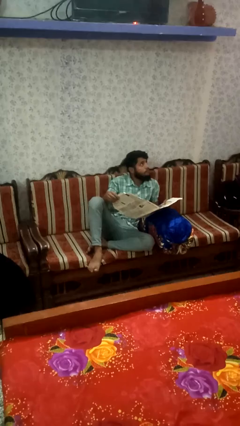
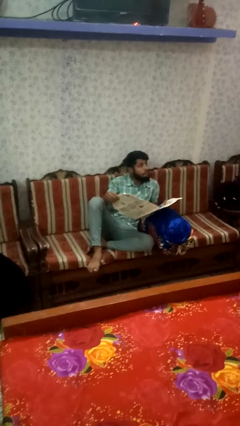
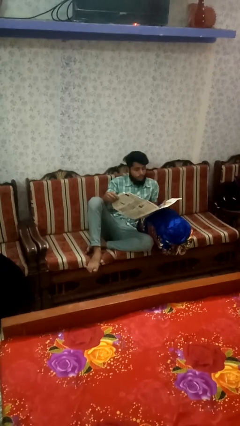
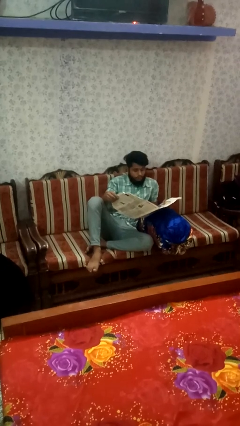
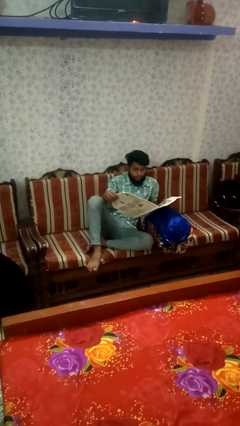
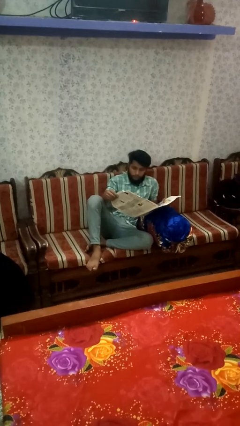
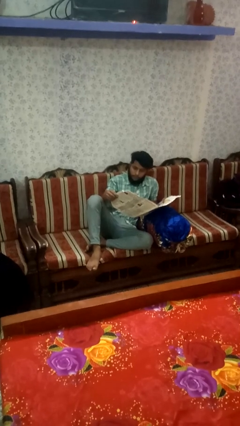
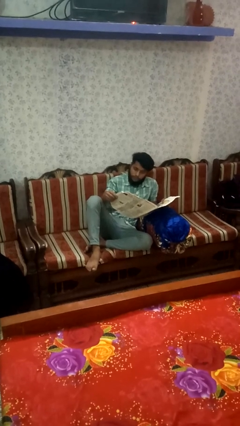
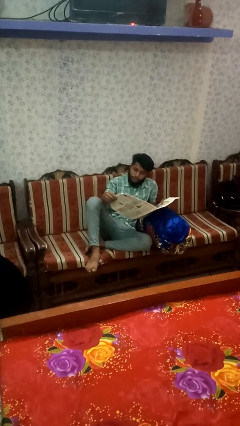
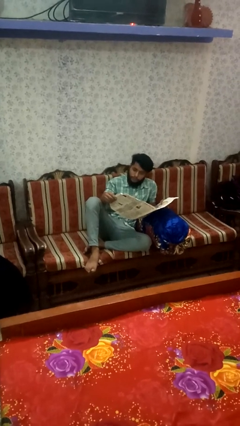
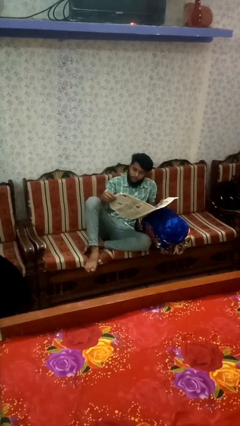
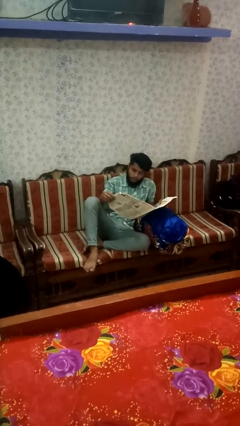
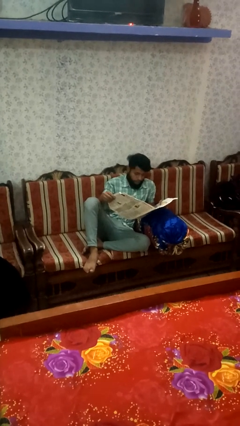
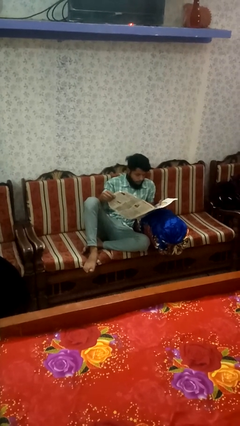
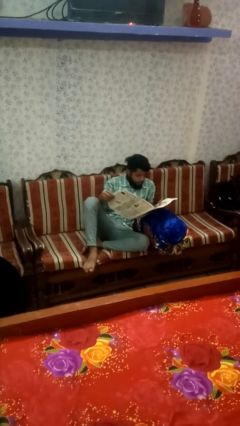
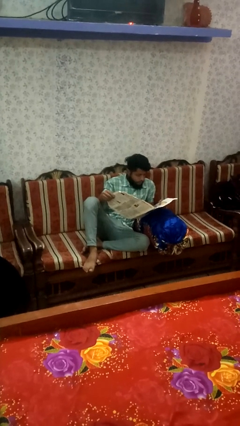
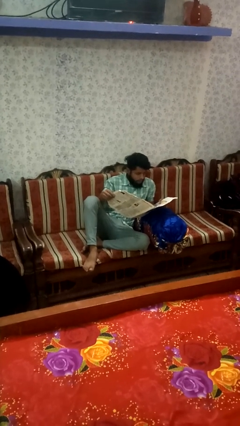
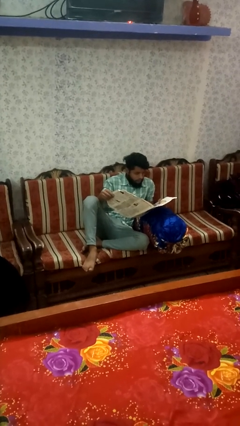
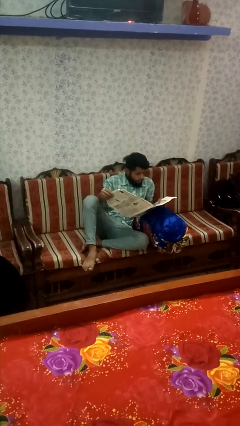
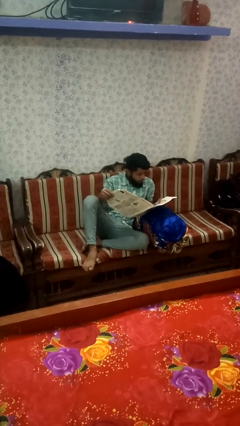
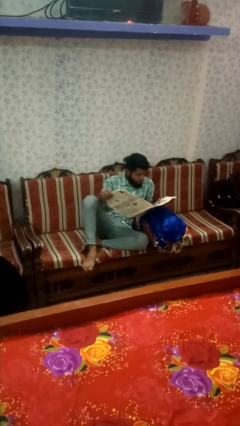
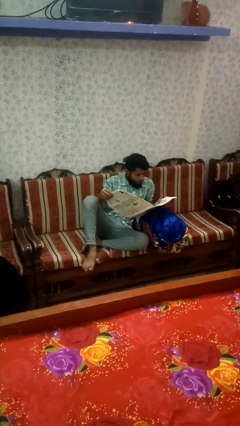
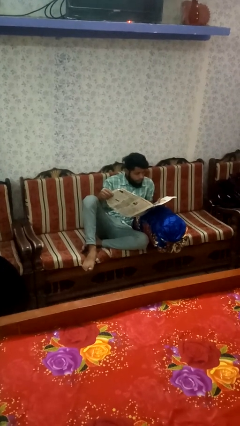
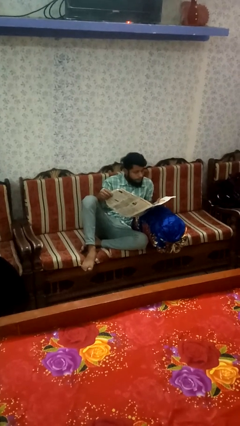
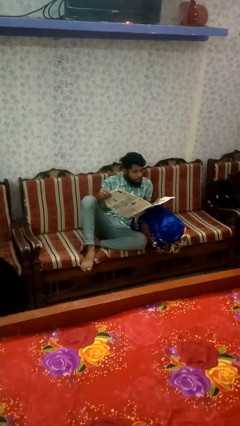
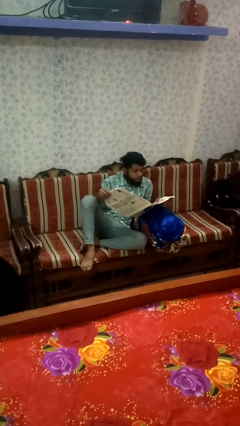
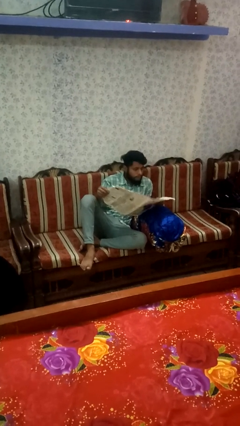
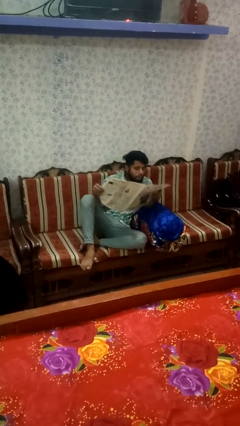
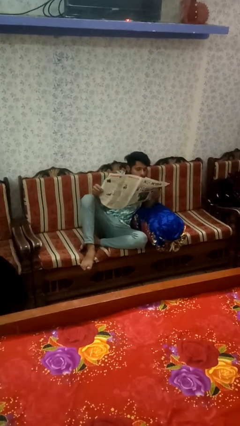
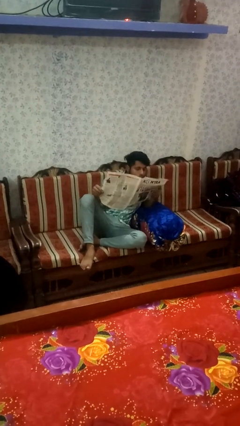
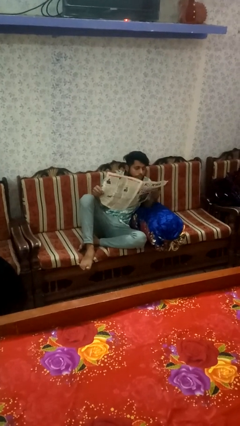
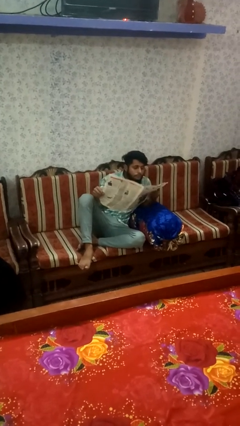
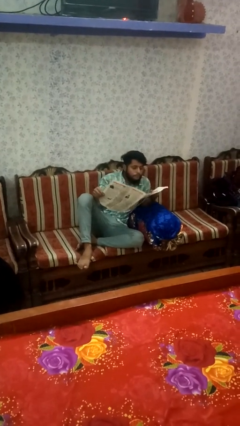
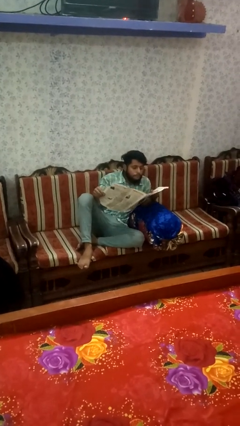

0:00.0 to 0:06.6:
person reads newspaper

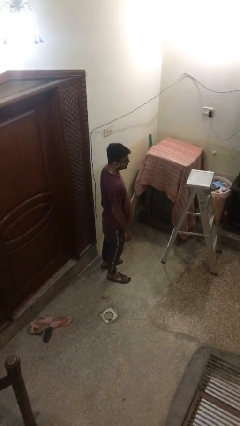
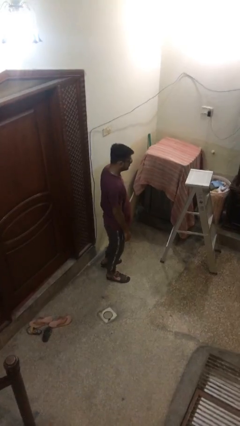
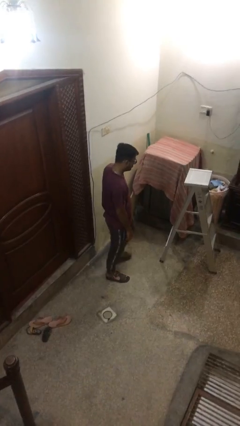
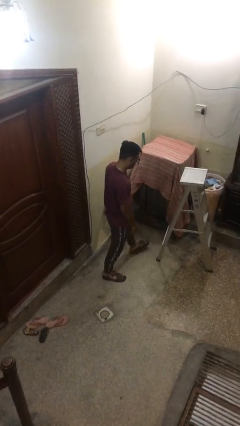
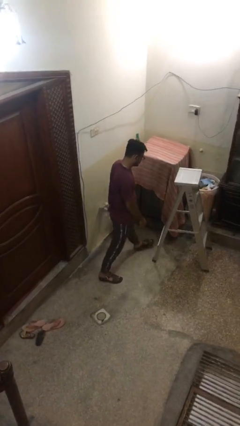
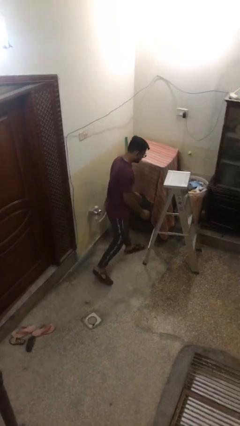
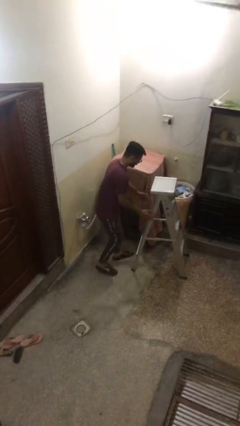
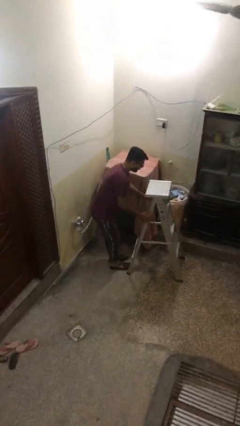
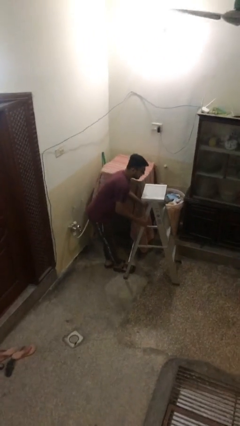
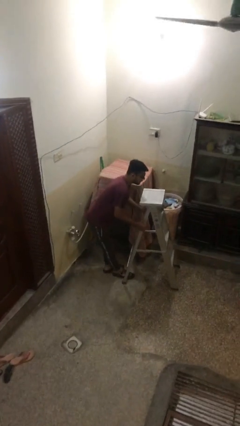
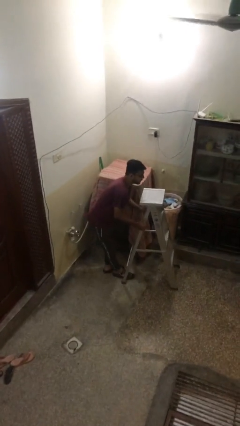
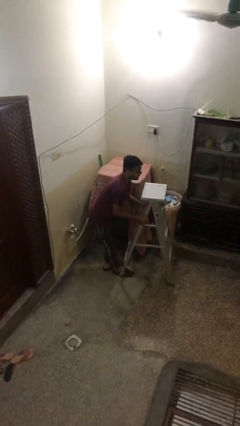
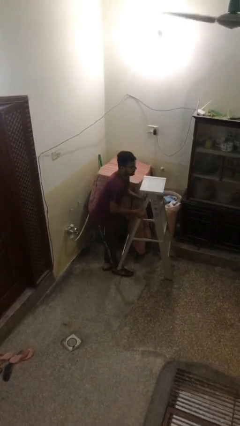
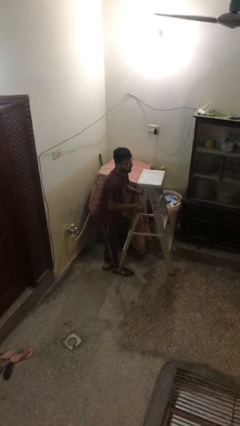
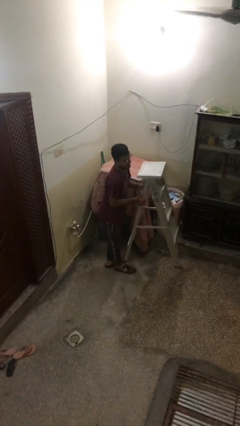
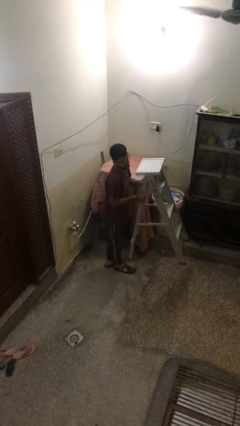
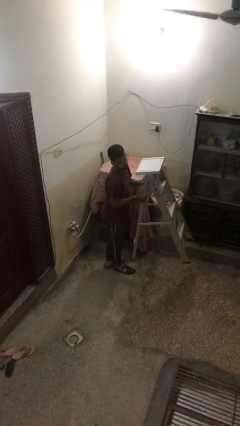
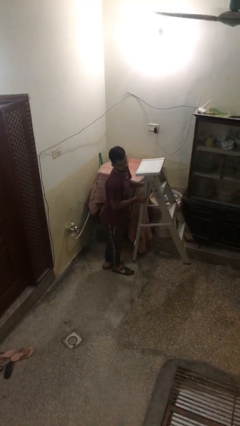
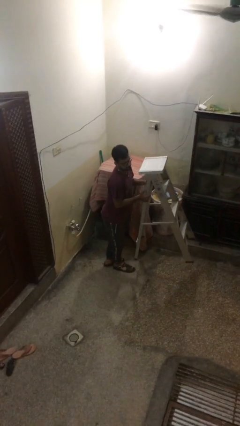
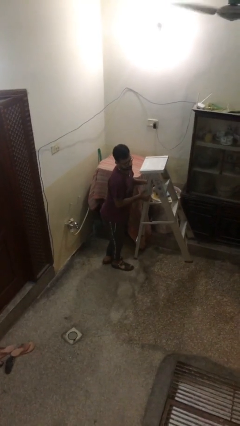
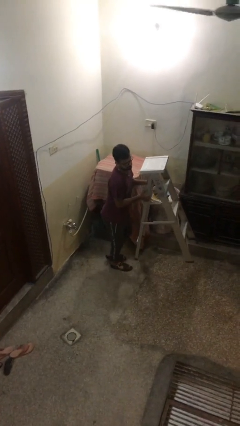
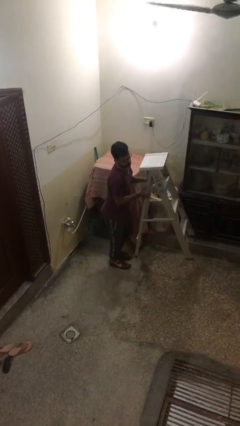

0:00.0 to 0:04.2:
person picks up object from floor

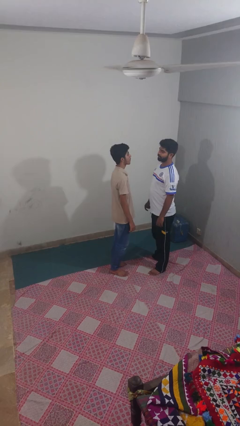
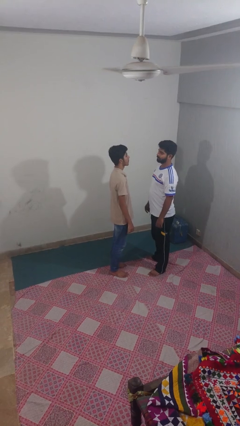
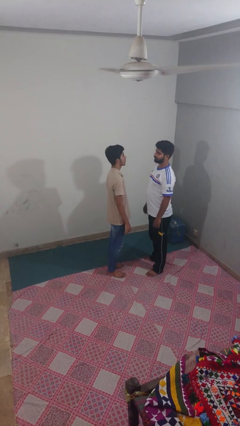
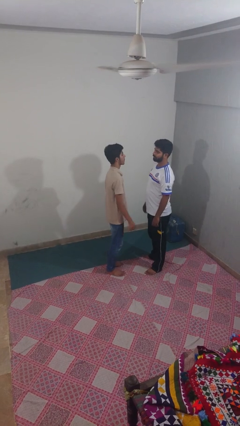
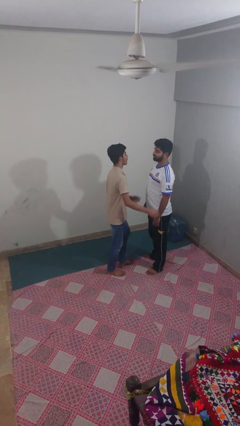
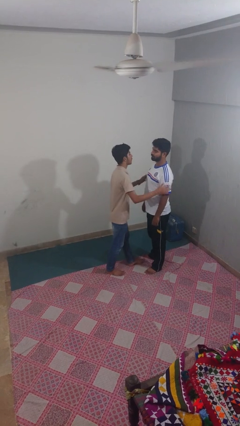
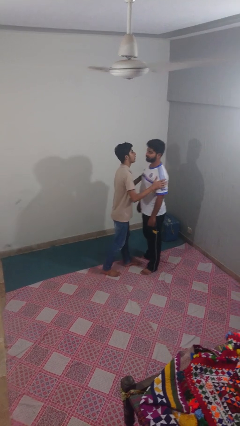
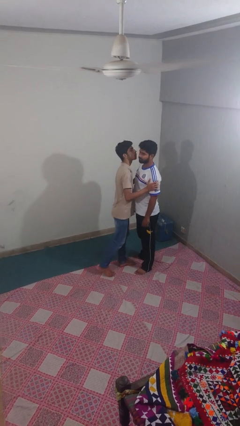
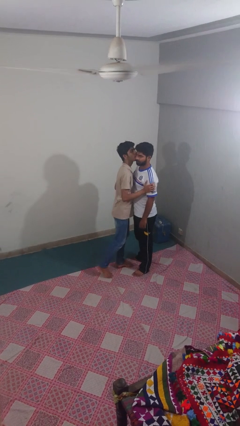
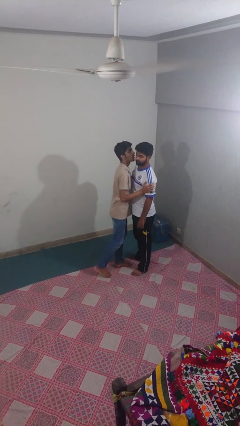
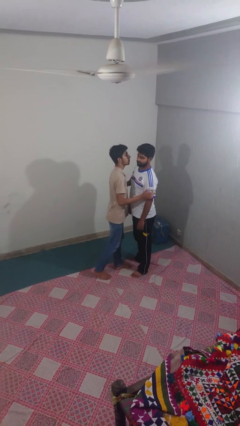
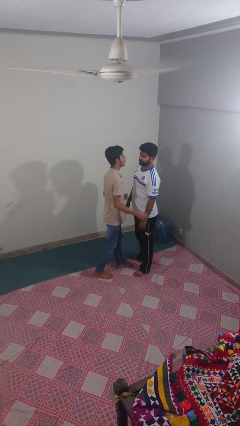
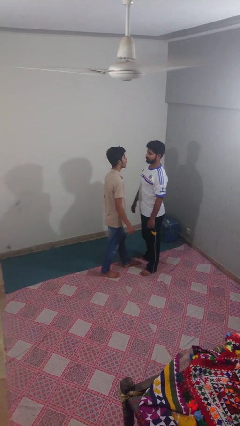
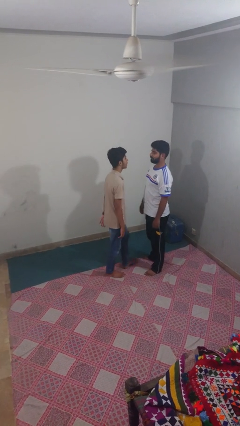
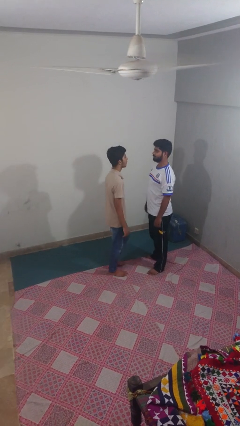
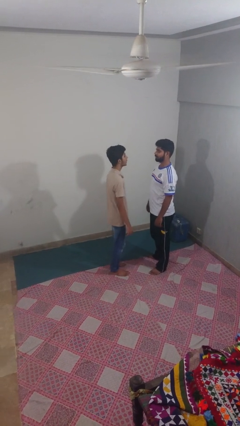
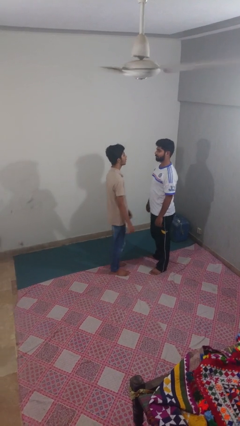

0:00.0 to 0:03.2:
person kisses cheek of person

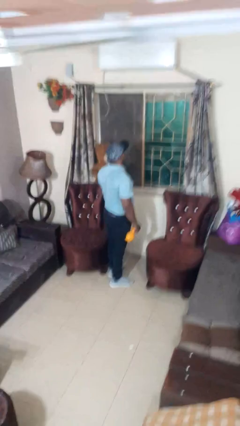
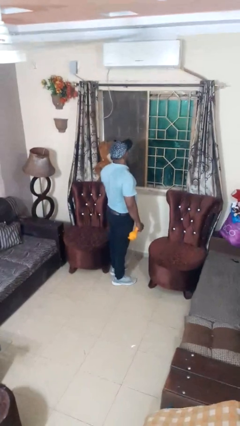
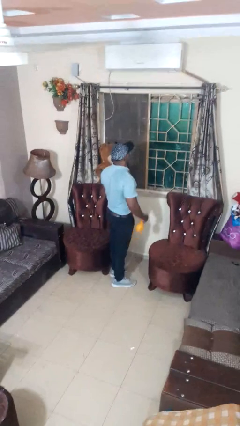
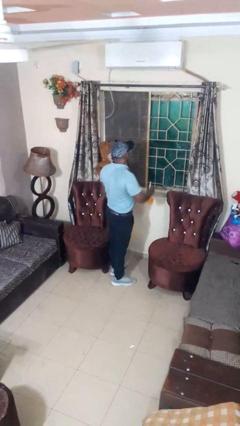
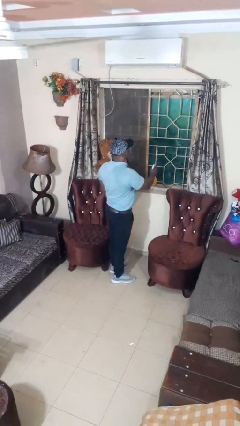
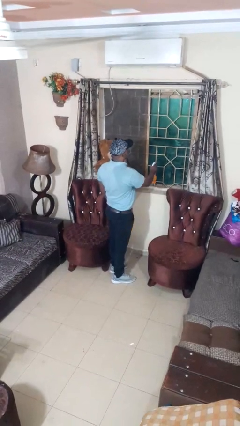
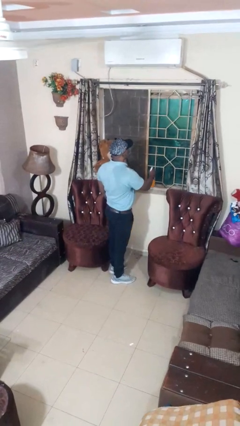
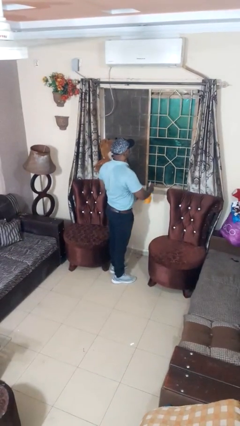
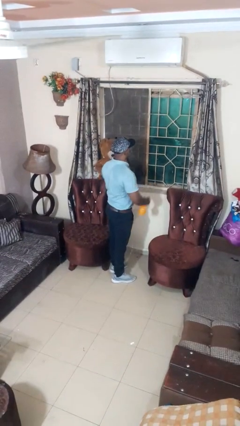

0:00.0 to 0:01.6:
person sprays from bottle

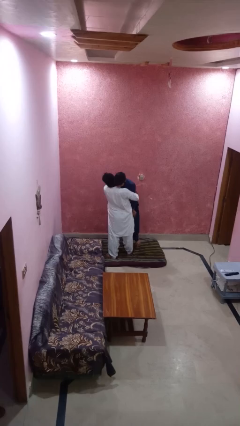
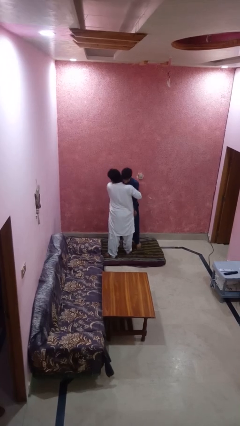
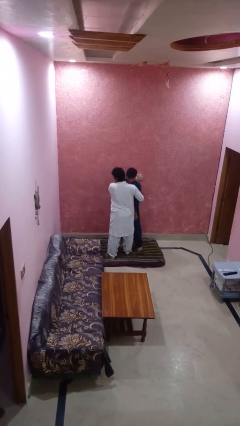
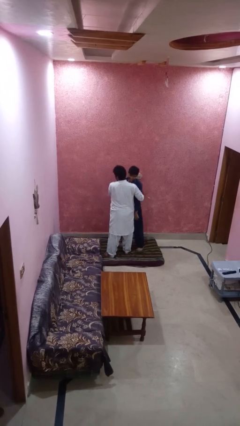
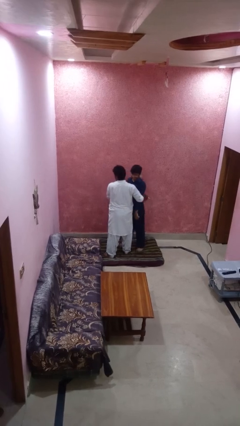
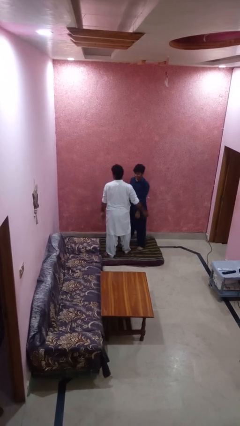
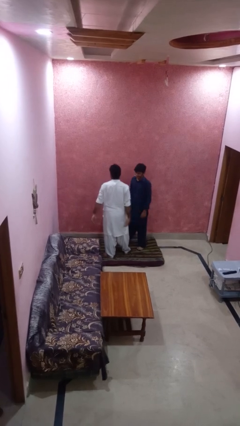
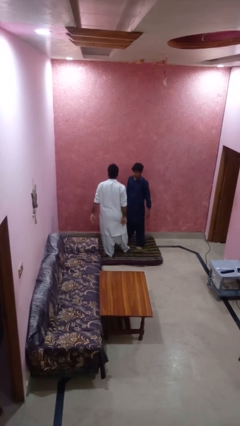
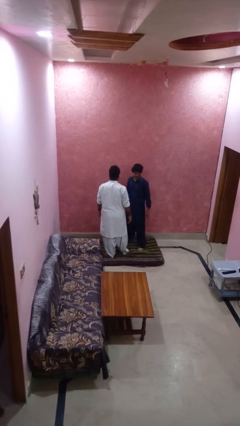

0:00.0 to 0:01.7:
person puts down person
